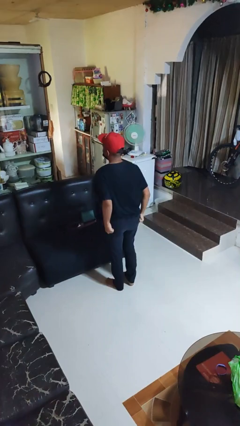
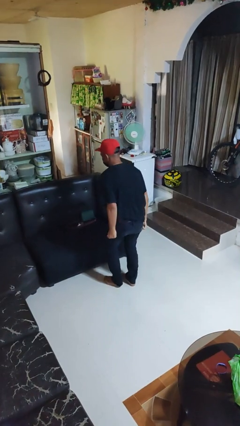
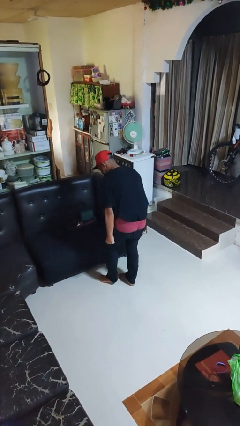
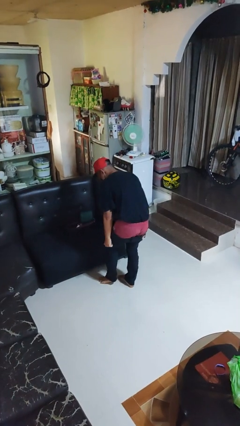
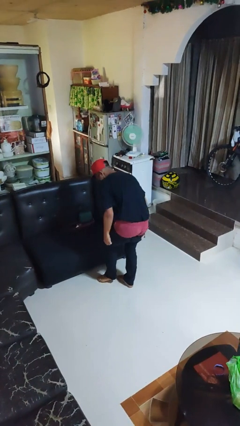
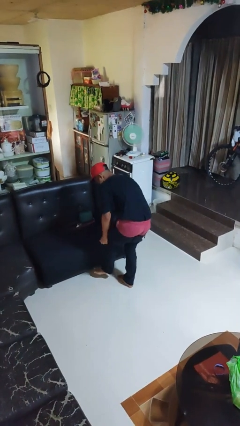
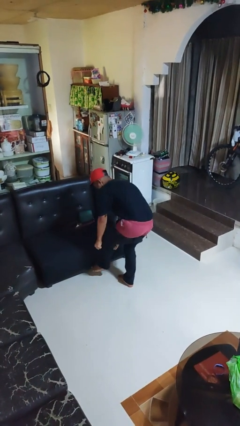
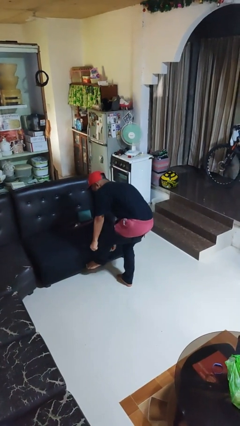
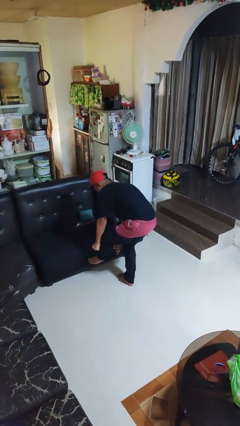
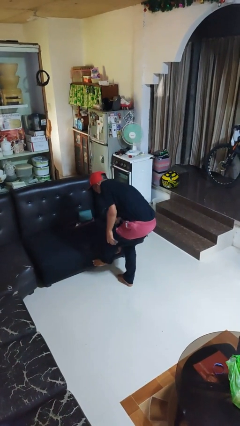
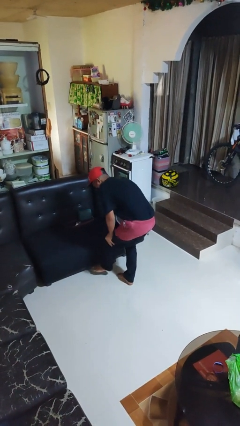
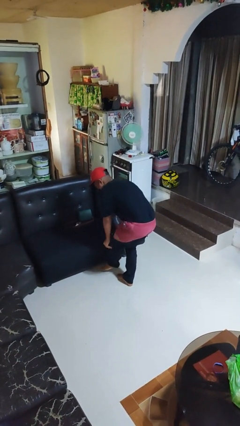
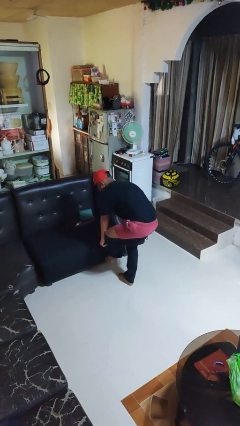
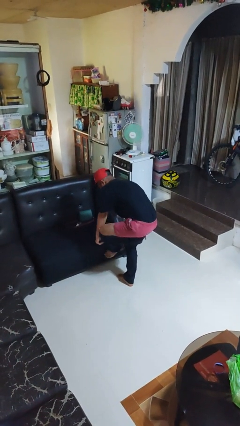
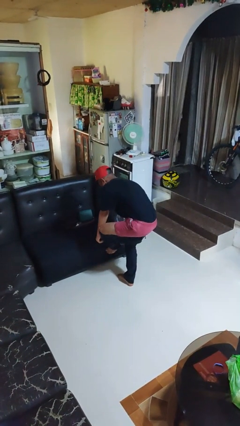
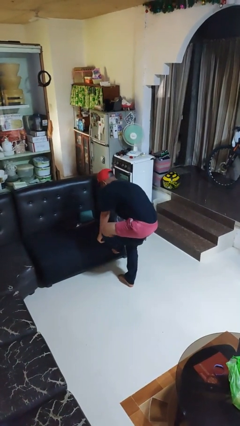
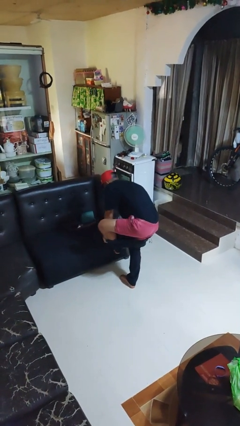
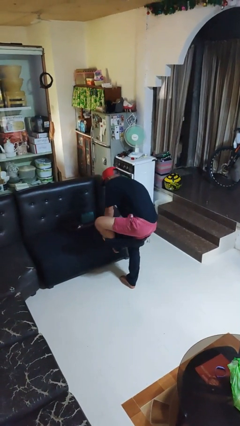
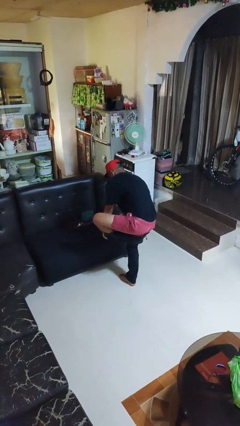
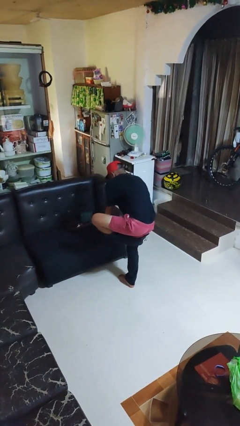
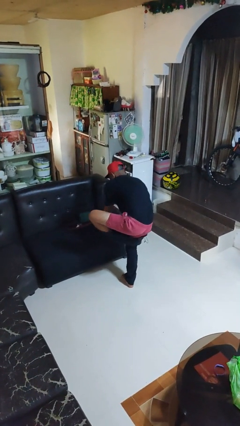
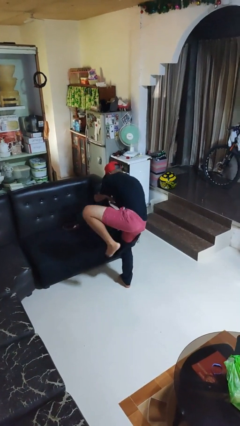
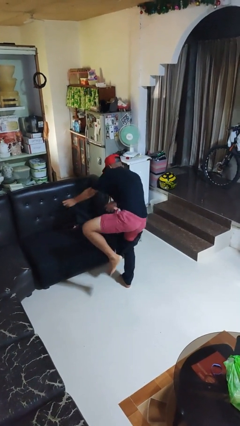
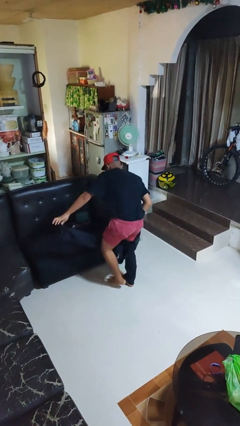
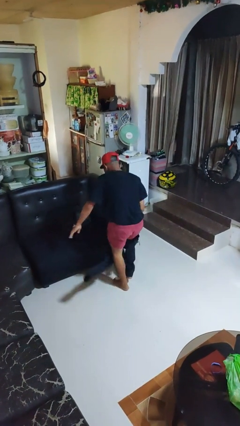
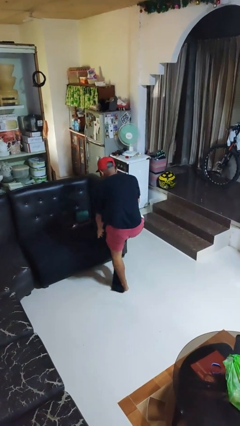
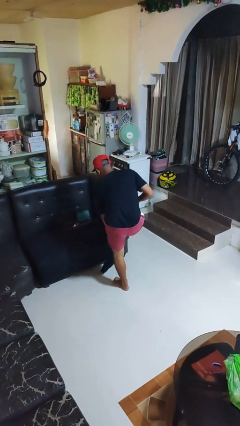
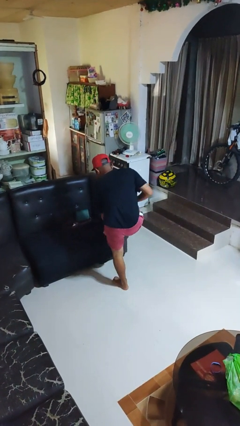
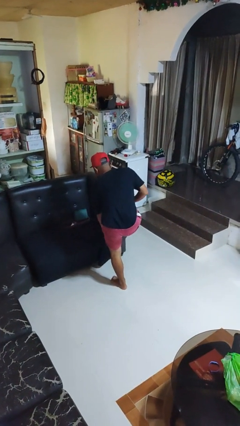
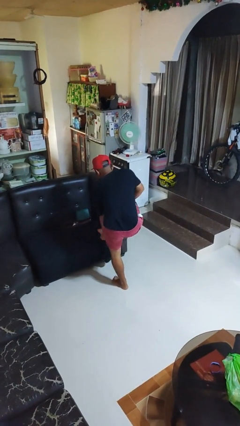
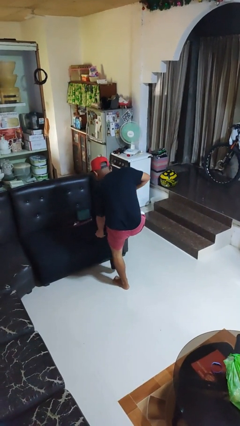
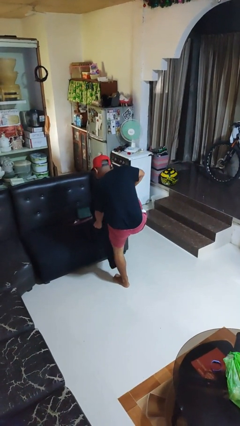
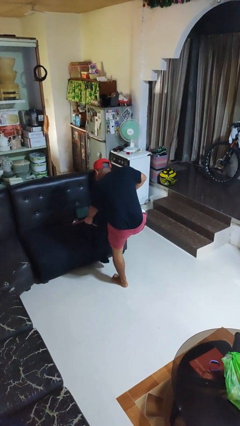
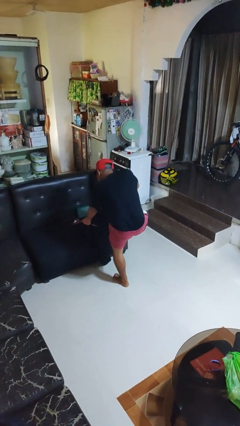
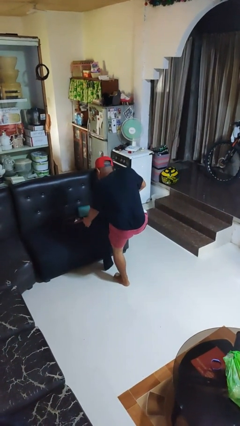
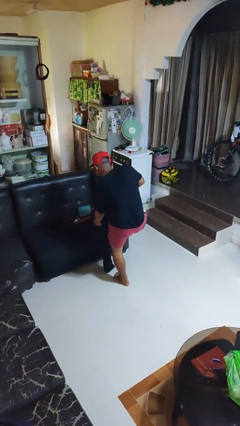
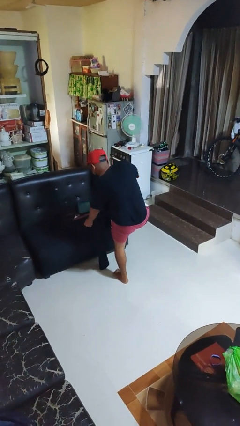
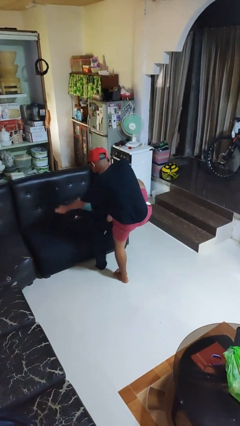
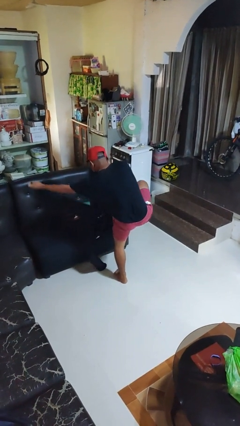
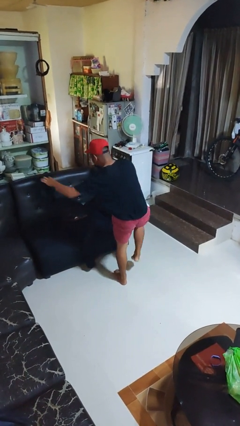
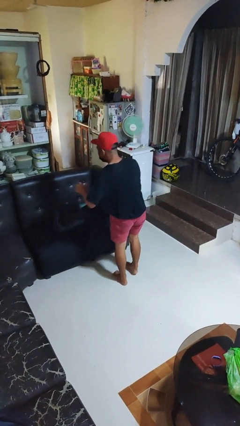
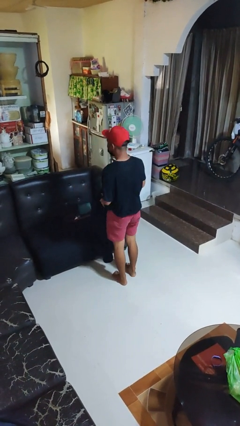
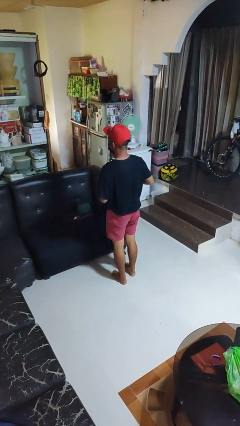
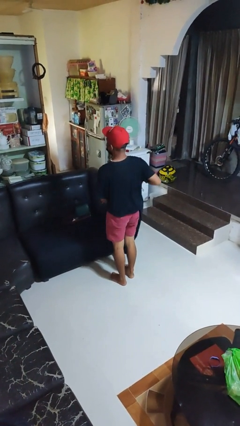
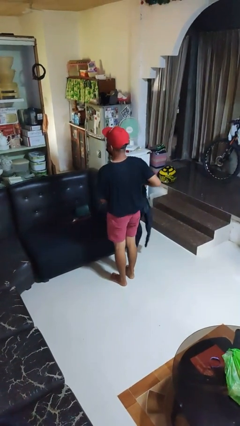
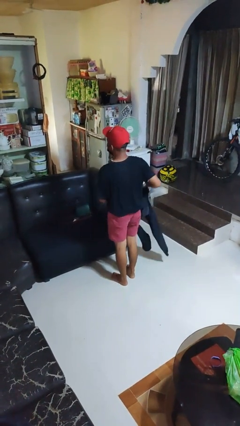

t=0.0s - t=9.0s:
person takes off pants

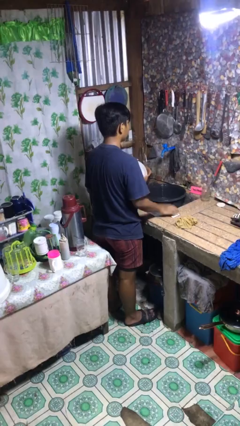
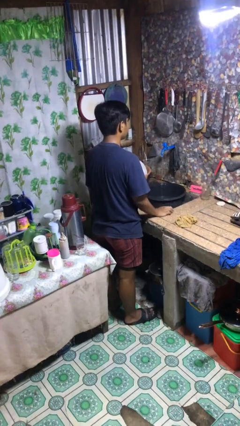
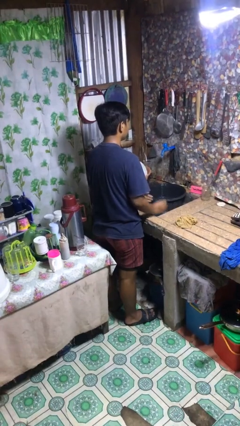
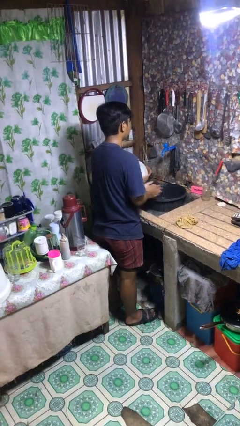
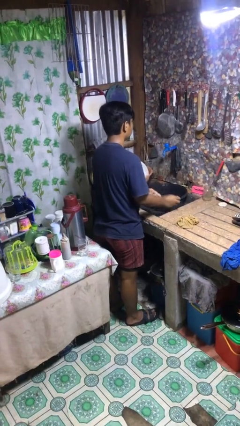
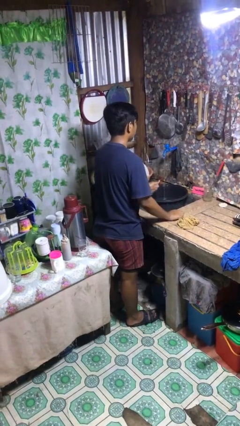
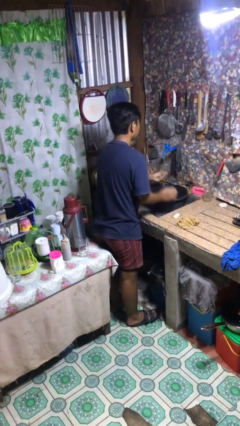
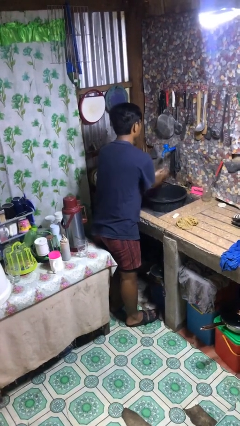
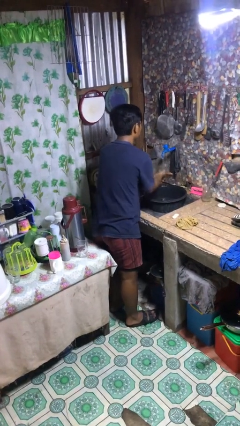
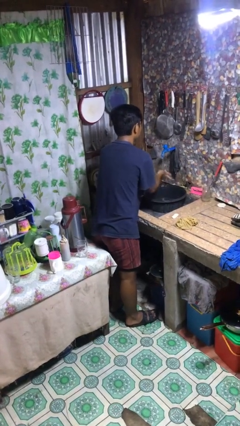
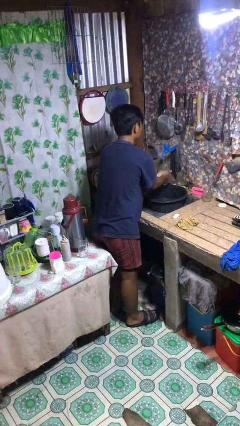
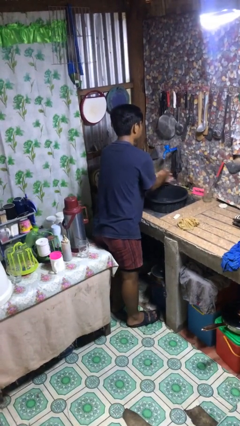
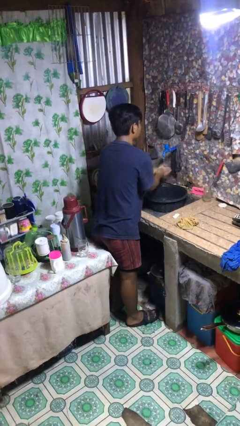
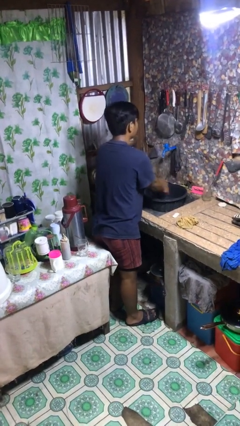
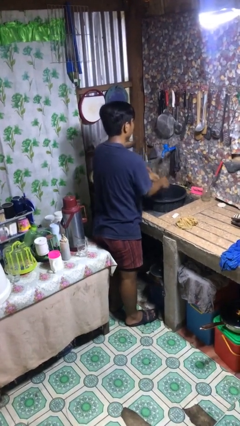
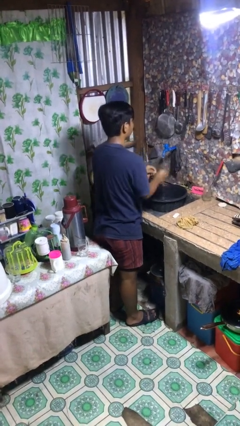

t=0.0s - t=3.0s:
person washes hands

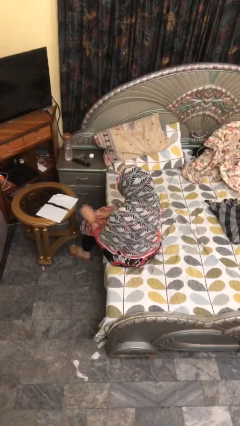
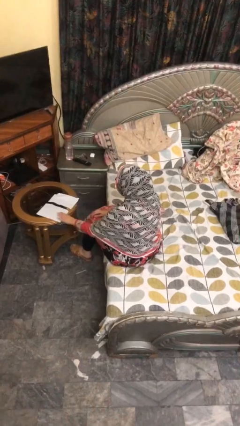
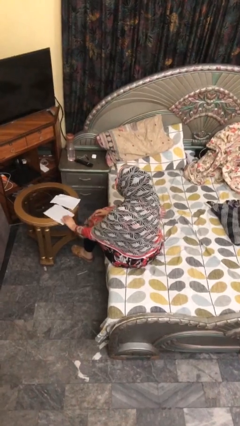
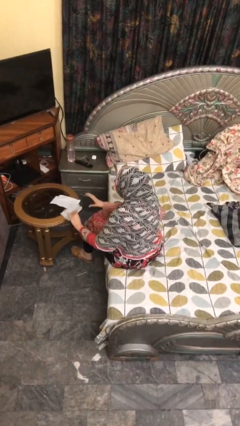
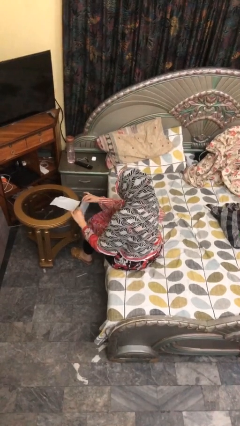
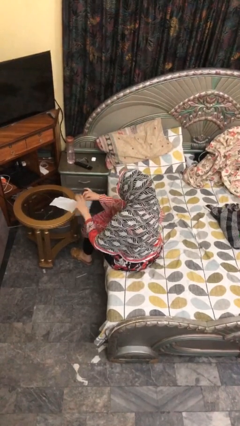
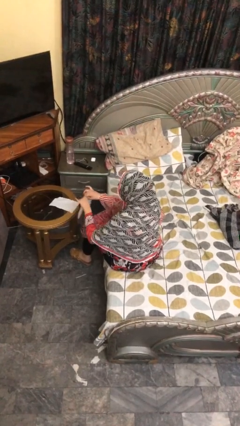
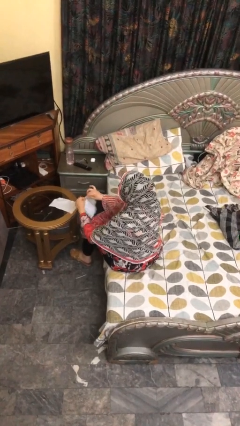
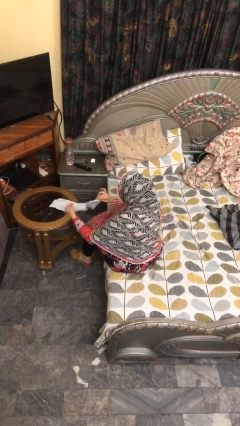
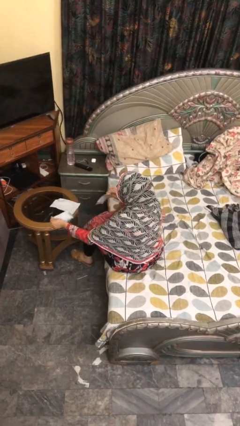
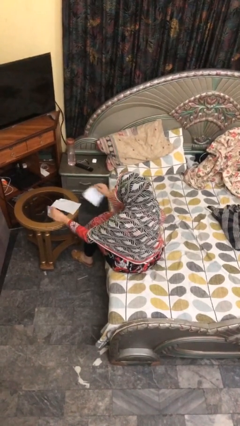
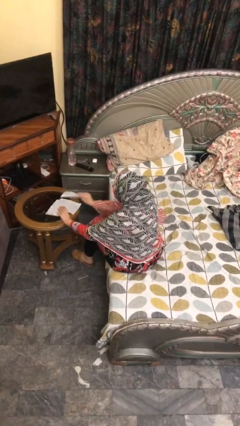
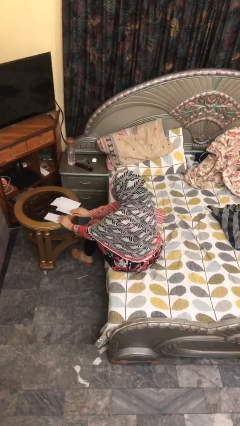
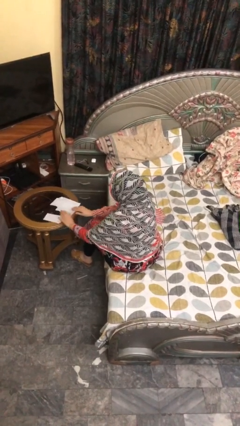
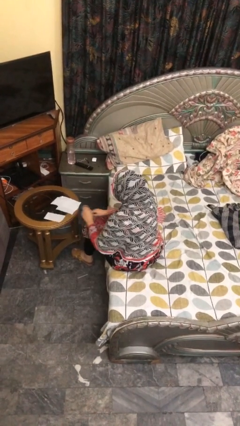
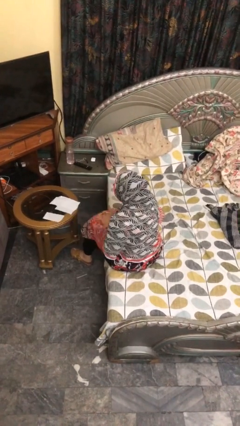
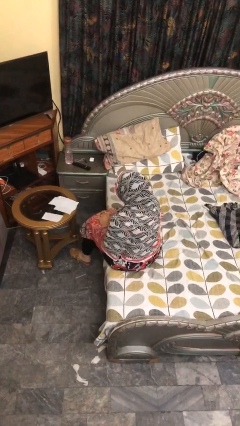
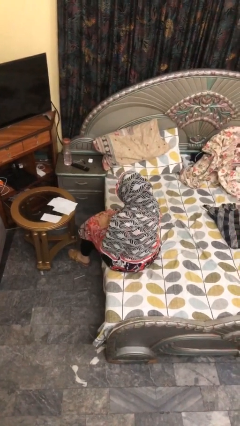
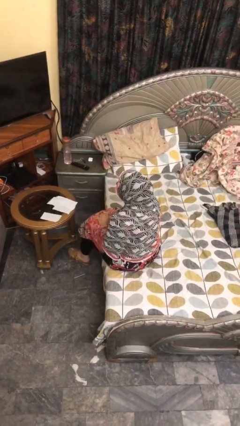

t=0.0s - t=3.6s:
person tears paper

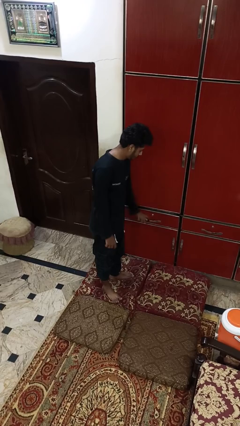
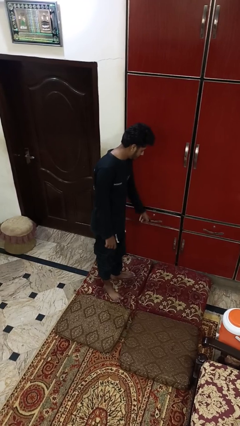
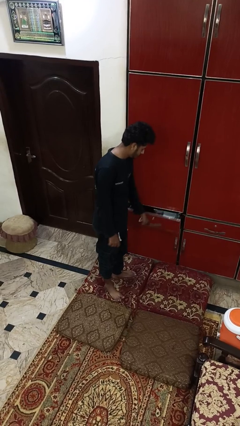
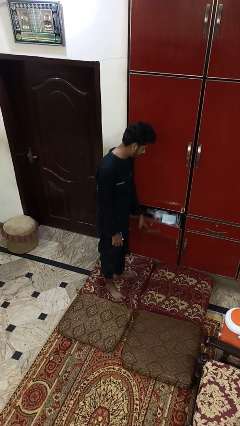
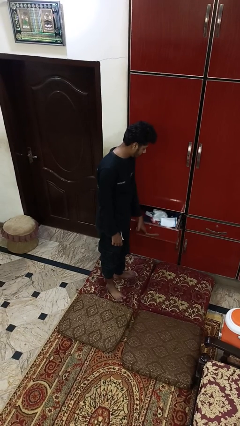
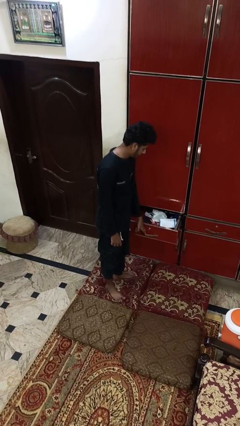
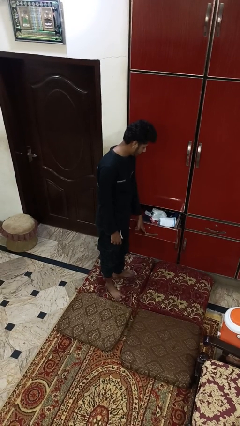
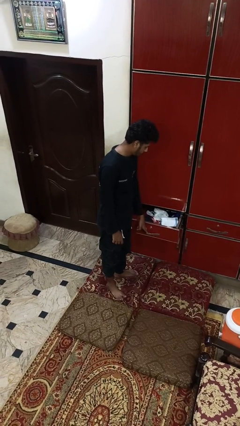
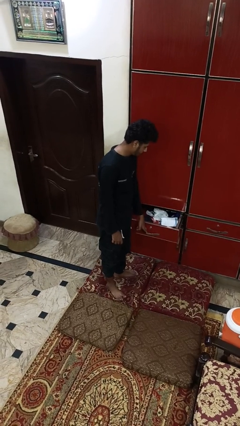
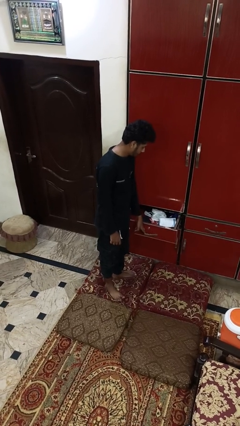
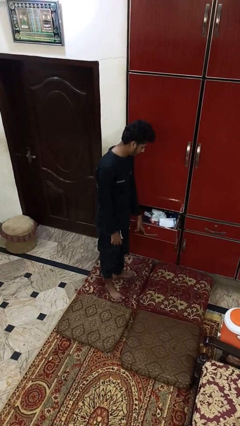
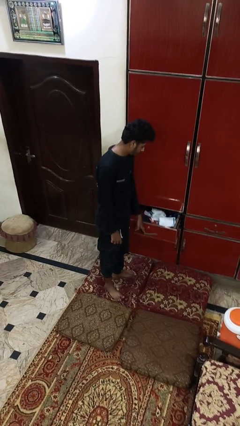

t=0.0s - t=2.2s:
person opens dresser drawer
